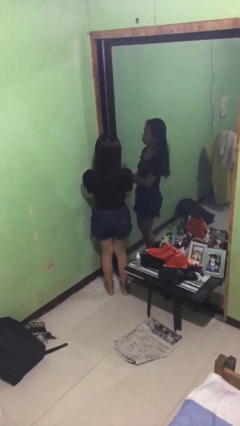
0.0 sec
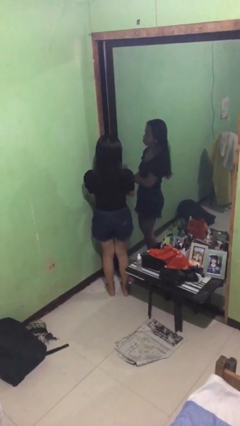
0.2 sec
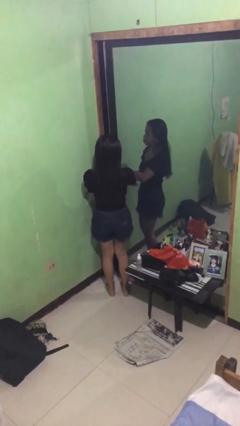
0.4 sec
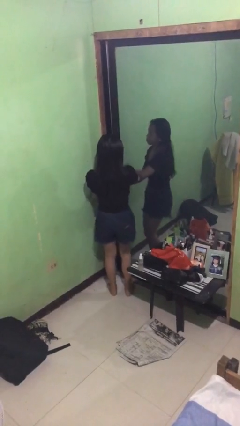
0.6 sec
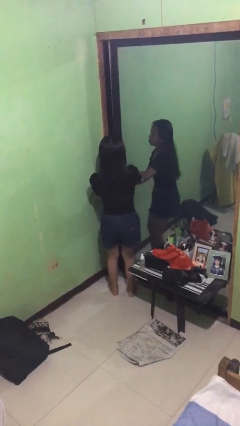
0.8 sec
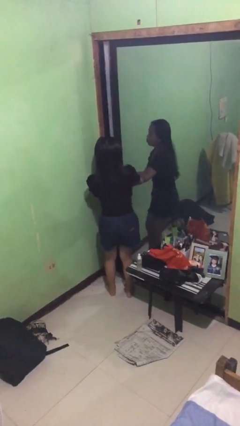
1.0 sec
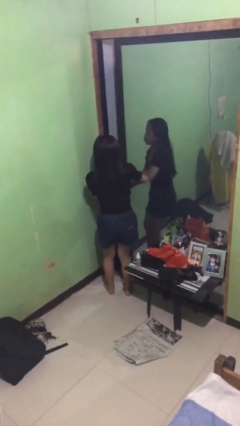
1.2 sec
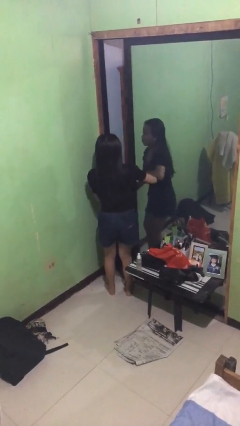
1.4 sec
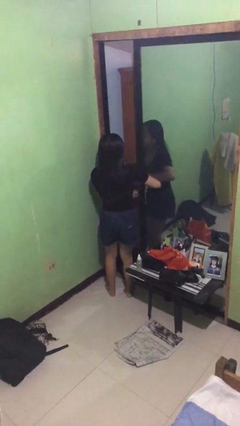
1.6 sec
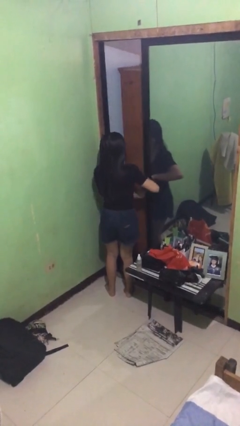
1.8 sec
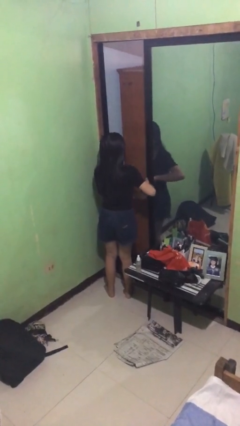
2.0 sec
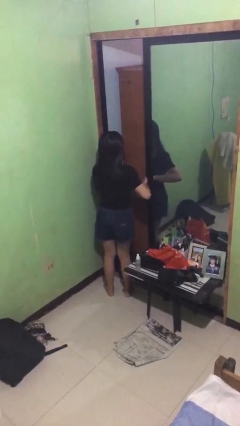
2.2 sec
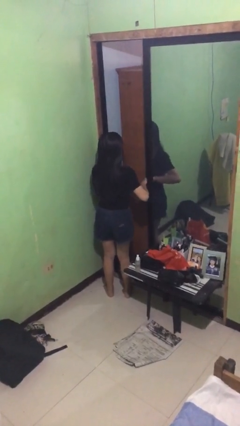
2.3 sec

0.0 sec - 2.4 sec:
person opens sliding door

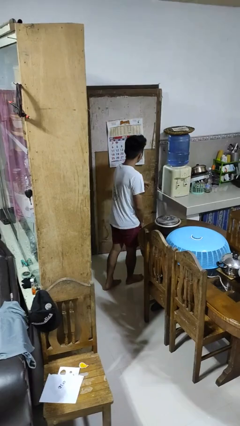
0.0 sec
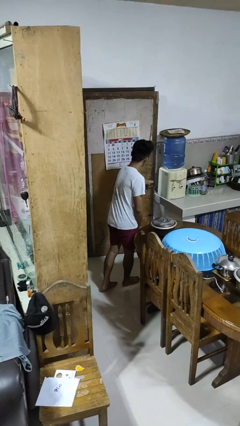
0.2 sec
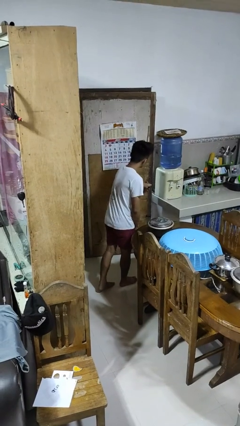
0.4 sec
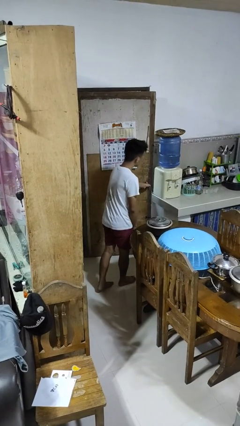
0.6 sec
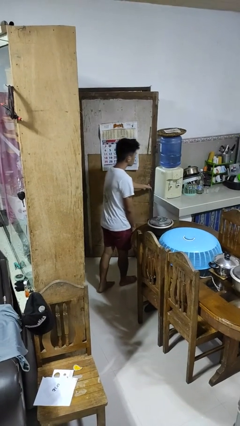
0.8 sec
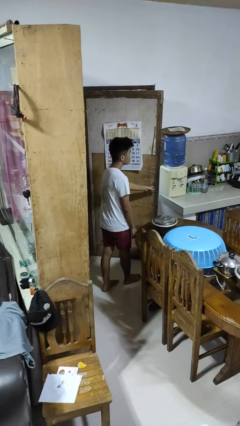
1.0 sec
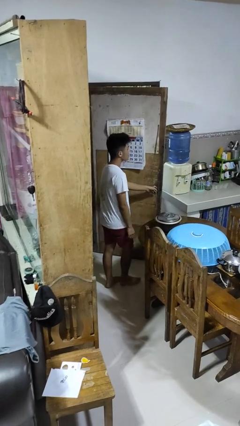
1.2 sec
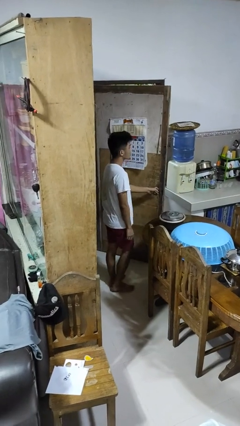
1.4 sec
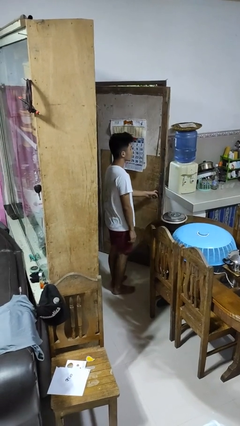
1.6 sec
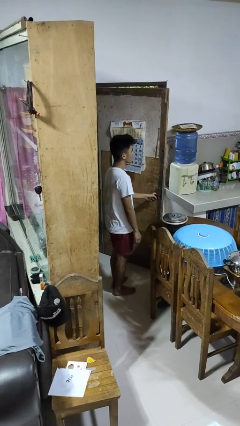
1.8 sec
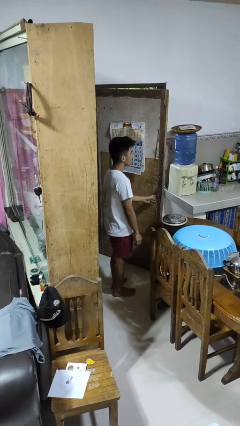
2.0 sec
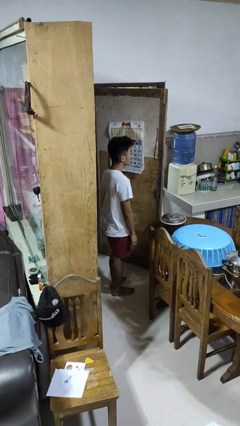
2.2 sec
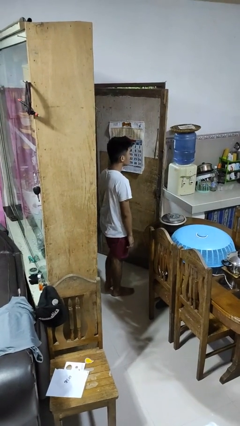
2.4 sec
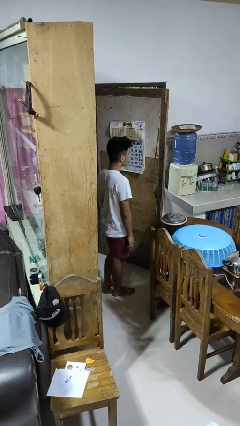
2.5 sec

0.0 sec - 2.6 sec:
person opens facility door

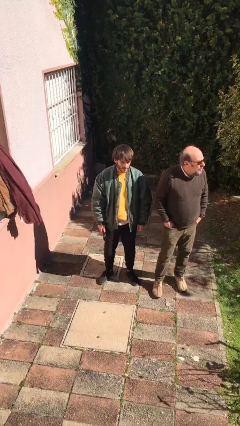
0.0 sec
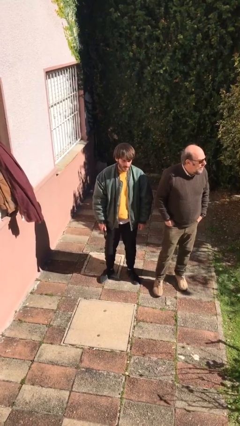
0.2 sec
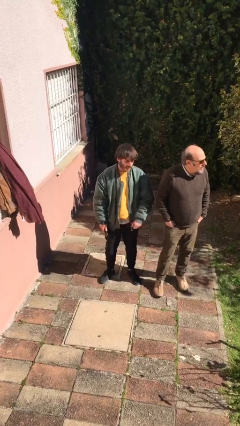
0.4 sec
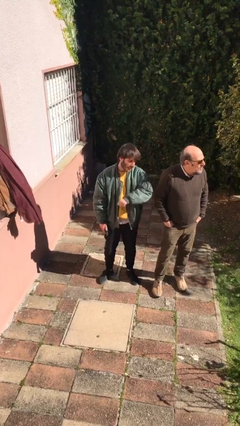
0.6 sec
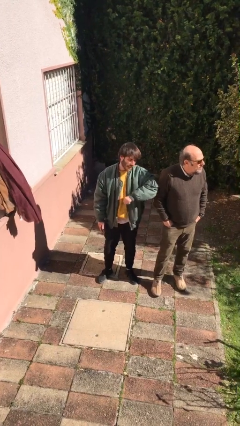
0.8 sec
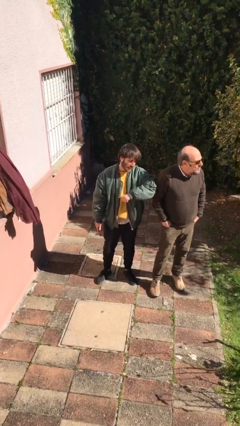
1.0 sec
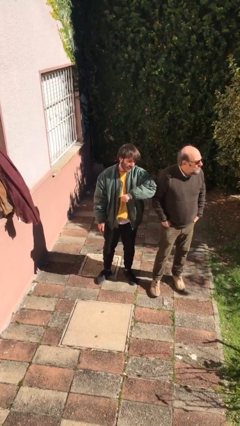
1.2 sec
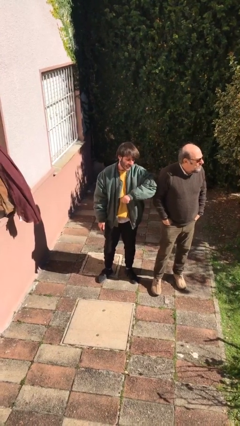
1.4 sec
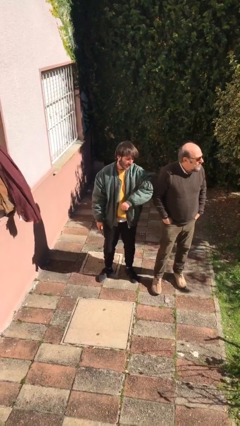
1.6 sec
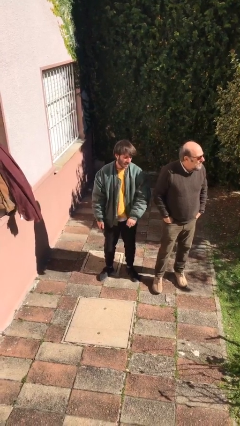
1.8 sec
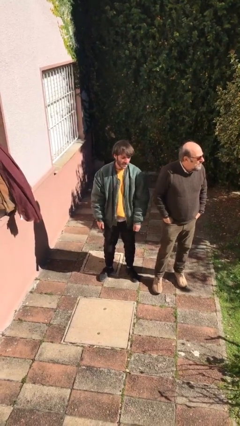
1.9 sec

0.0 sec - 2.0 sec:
person nudges person with elbow

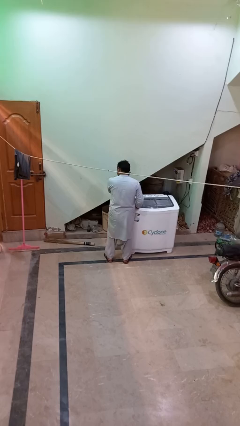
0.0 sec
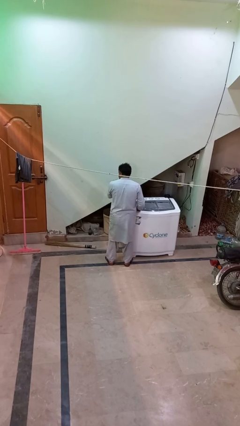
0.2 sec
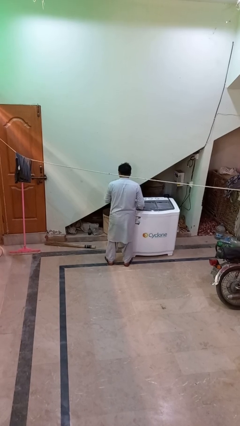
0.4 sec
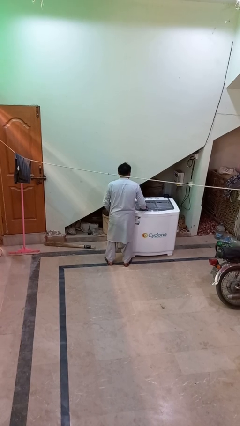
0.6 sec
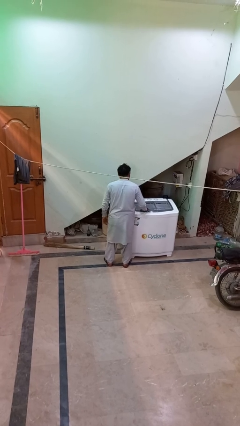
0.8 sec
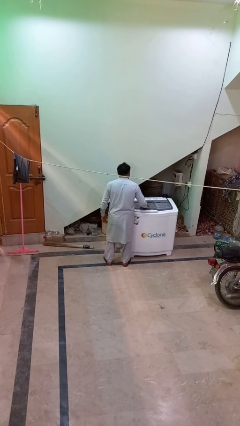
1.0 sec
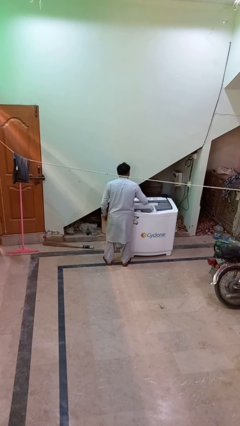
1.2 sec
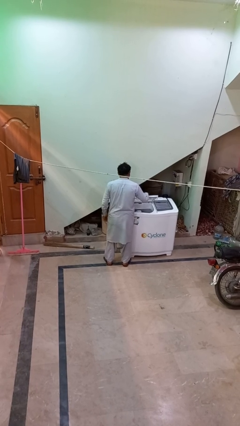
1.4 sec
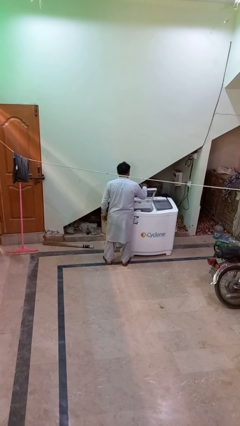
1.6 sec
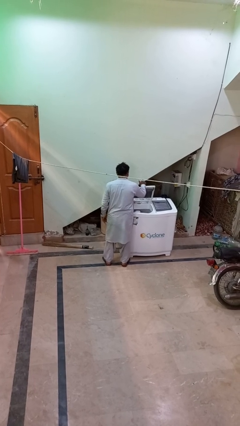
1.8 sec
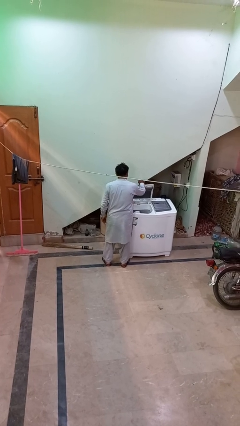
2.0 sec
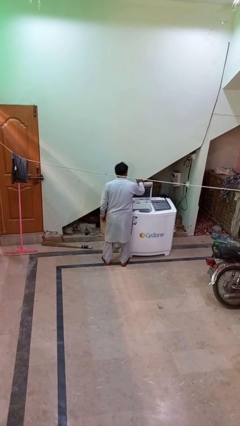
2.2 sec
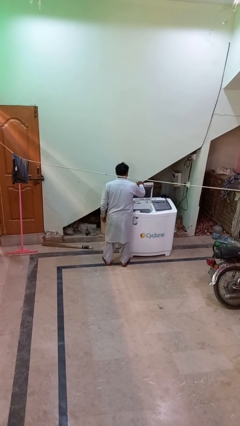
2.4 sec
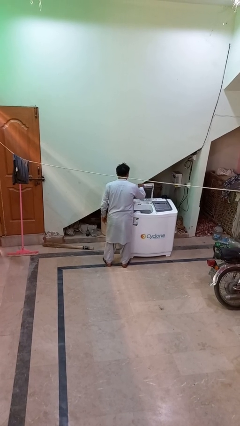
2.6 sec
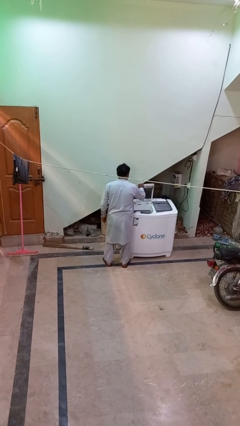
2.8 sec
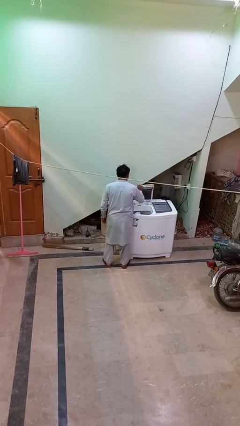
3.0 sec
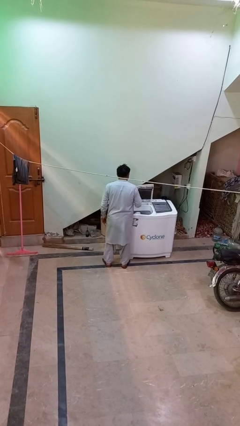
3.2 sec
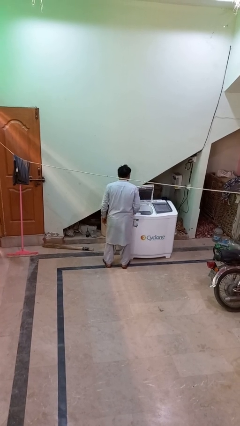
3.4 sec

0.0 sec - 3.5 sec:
person opens clothes washer

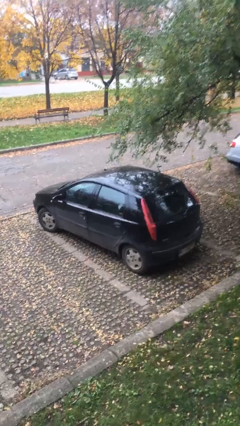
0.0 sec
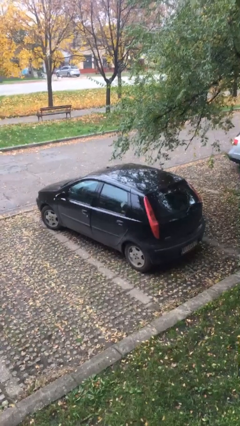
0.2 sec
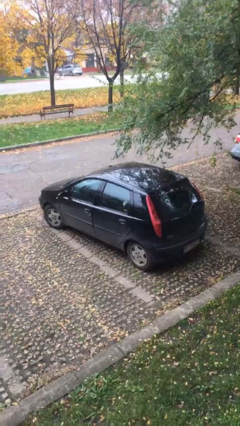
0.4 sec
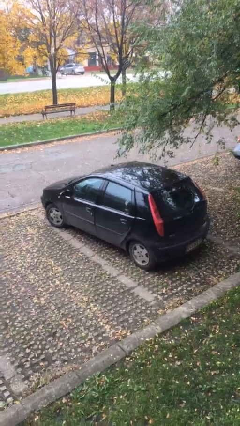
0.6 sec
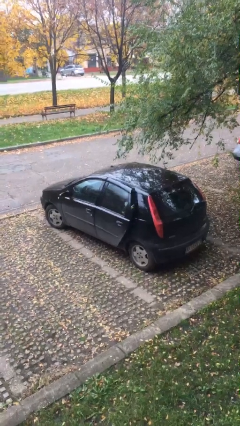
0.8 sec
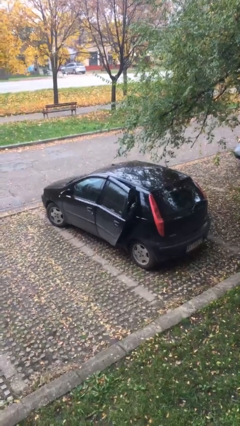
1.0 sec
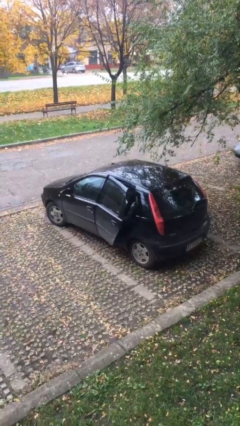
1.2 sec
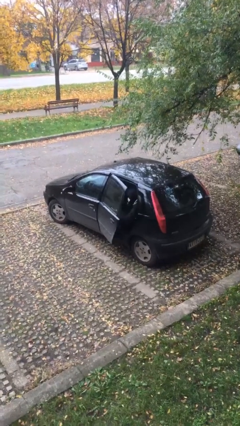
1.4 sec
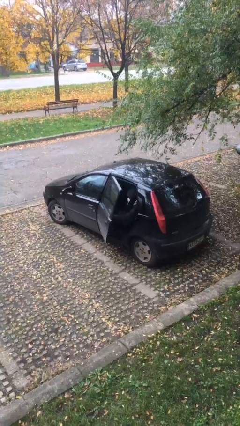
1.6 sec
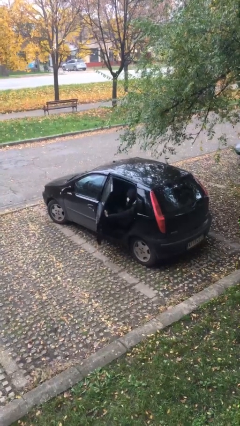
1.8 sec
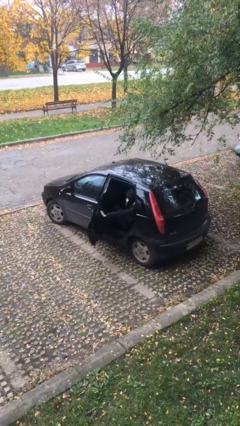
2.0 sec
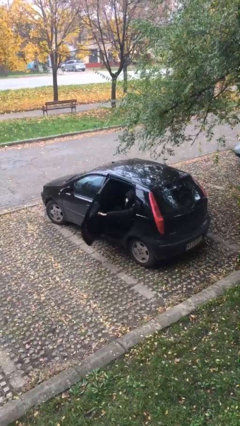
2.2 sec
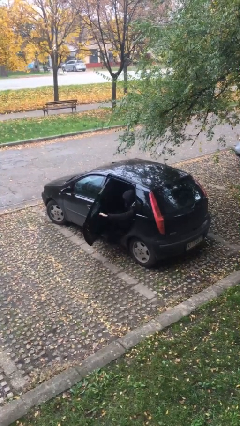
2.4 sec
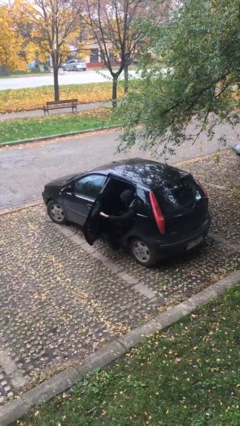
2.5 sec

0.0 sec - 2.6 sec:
person opens car door

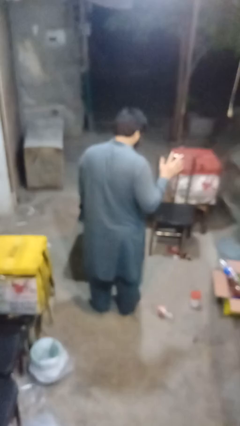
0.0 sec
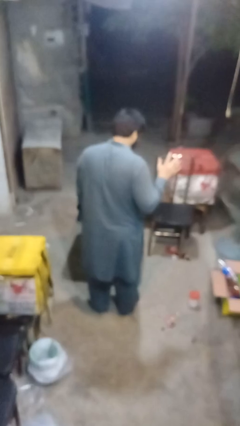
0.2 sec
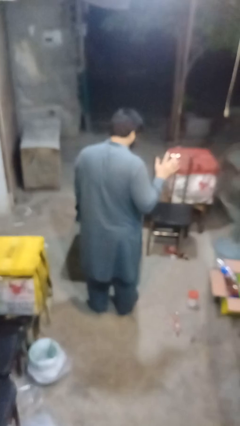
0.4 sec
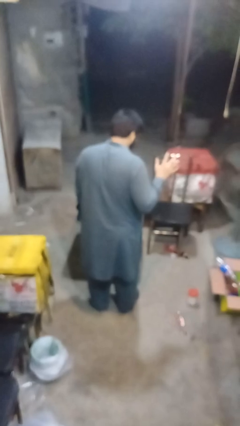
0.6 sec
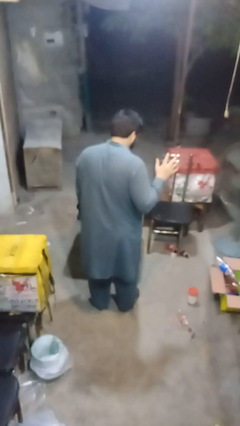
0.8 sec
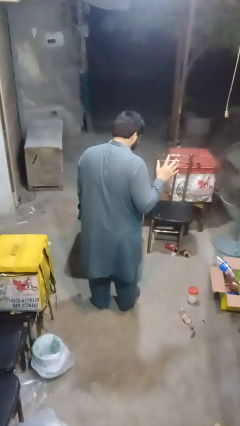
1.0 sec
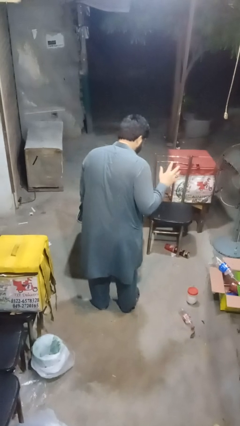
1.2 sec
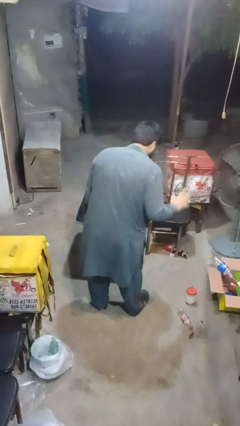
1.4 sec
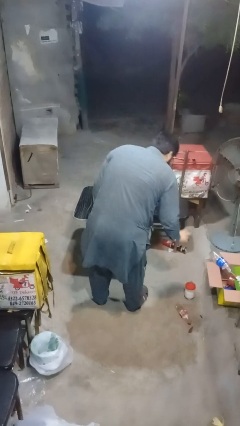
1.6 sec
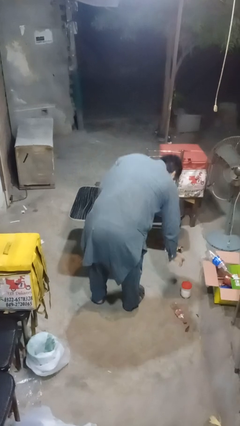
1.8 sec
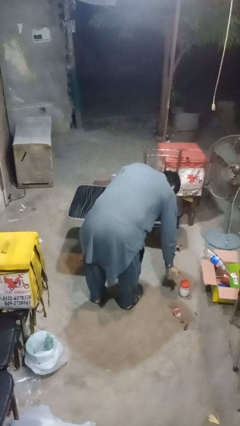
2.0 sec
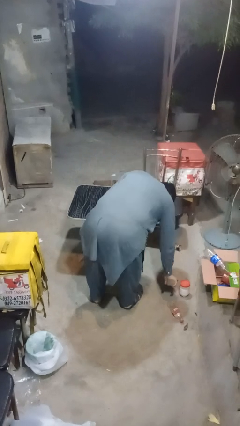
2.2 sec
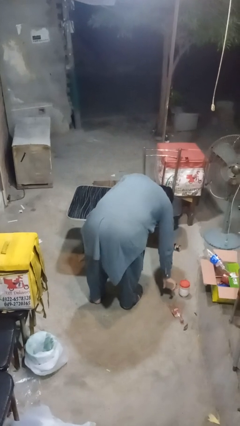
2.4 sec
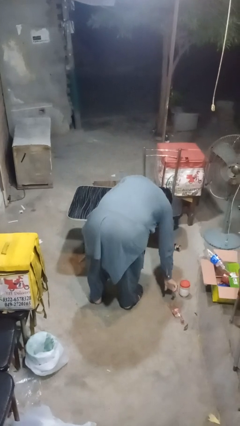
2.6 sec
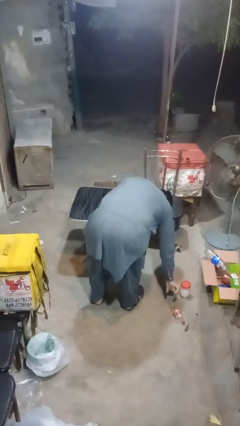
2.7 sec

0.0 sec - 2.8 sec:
person throws object to ground

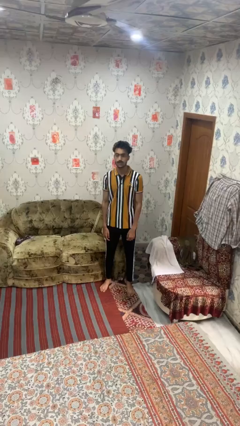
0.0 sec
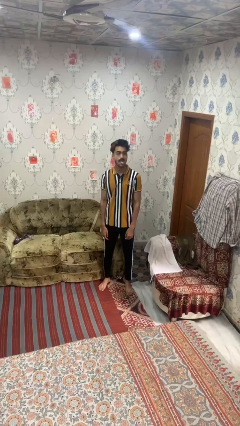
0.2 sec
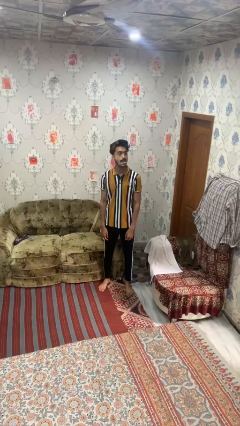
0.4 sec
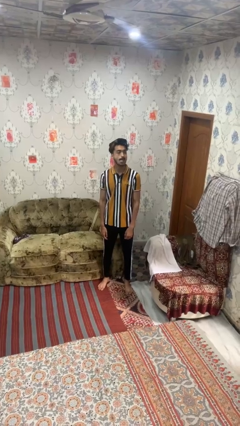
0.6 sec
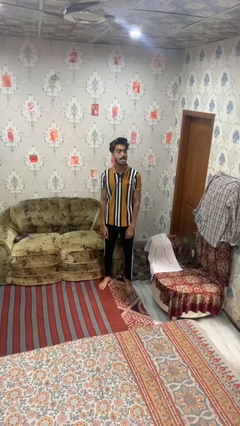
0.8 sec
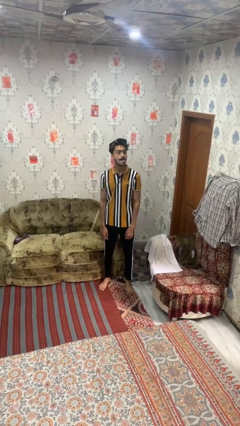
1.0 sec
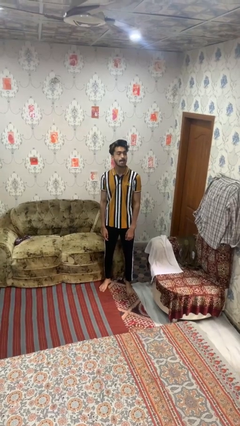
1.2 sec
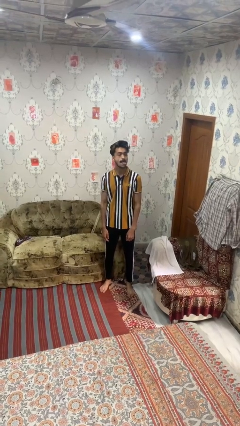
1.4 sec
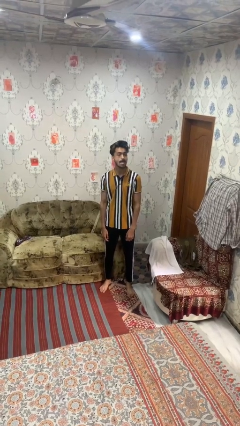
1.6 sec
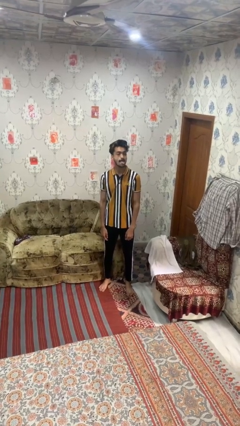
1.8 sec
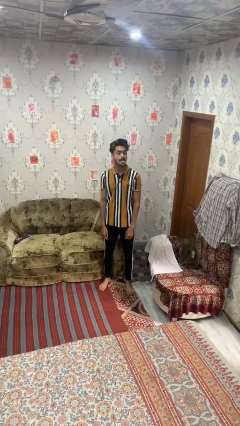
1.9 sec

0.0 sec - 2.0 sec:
person sticks out tongue
